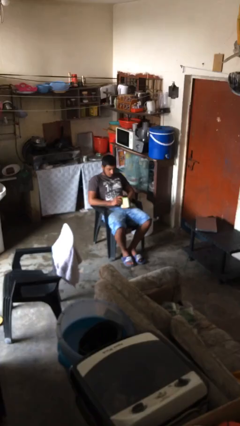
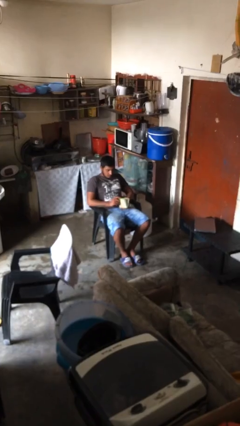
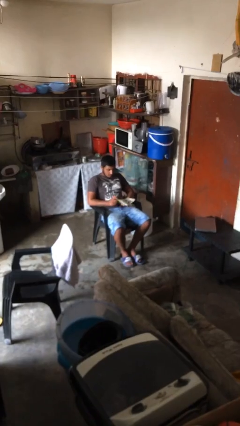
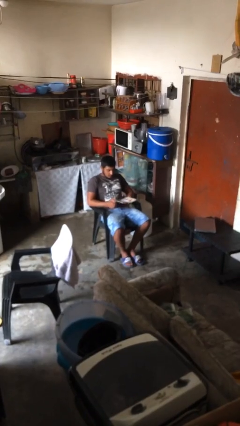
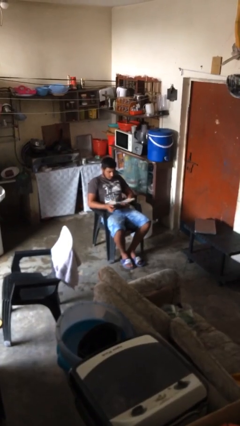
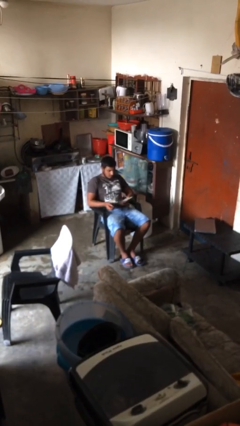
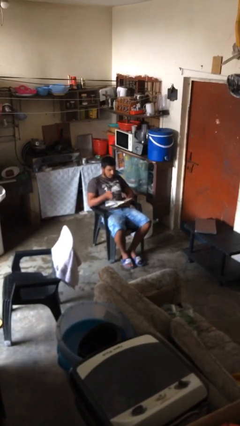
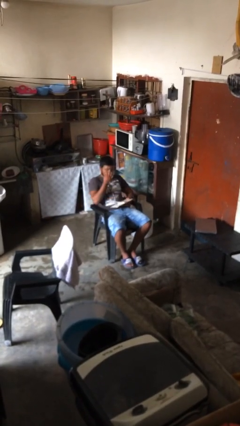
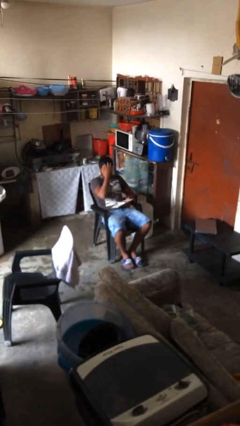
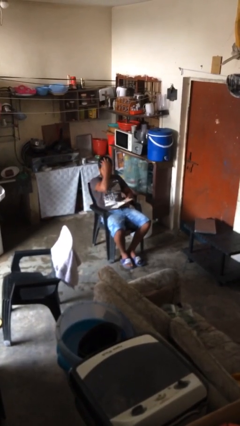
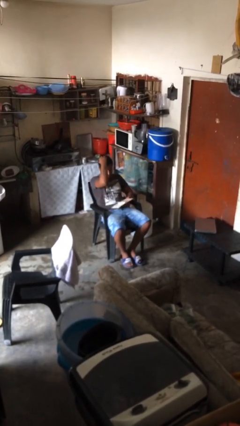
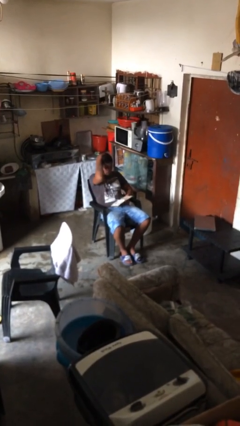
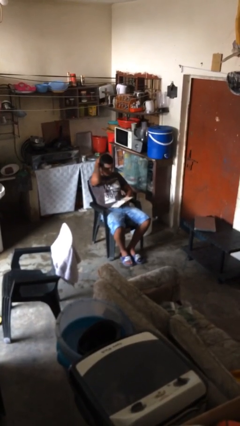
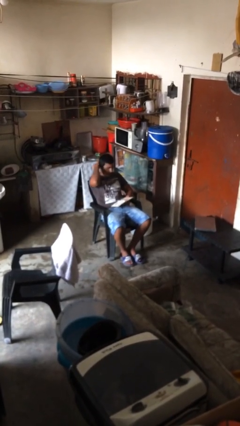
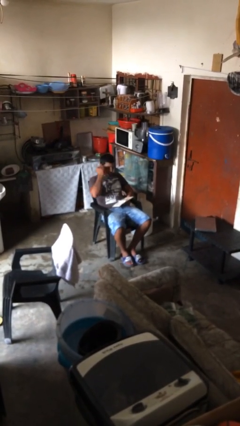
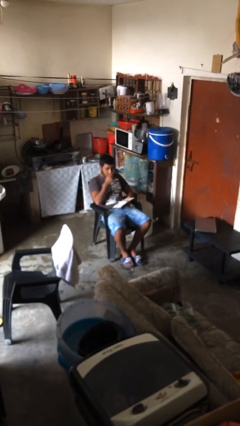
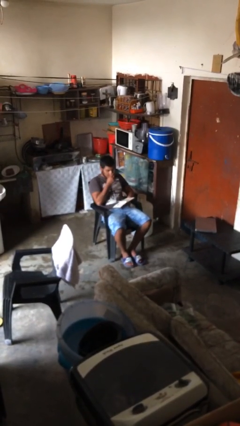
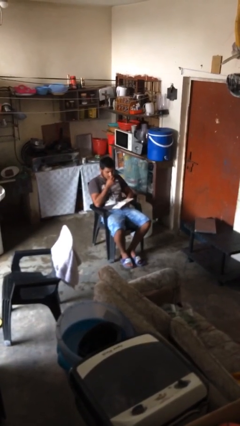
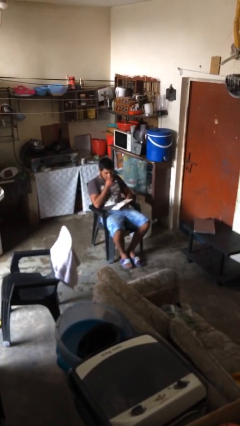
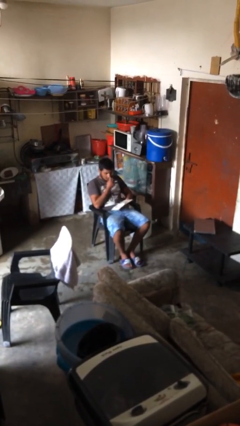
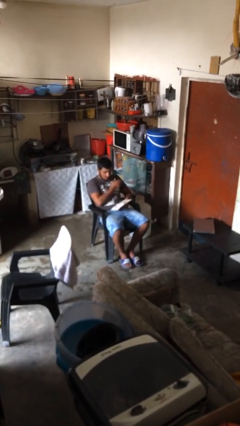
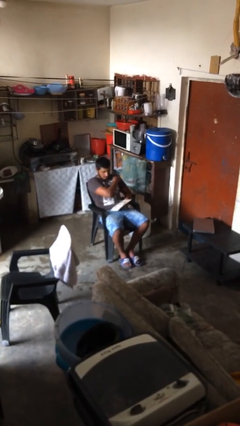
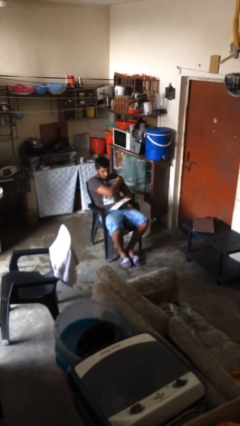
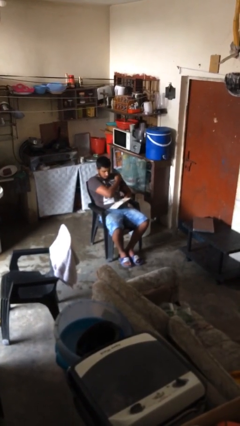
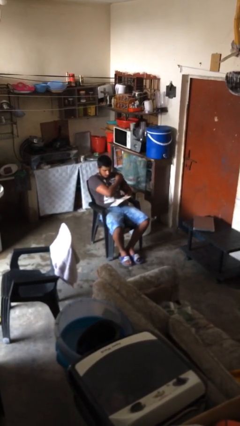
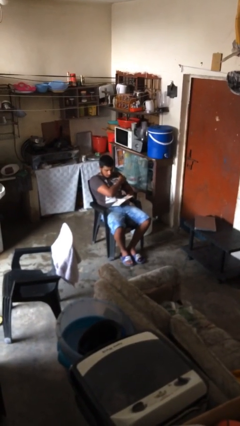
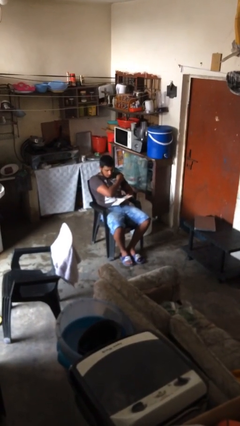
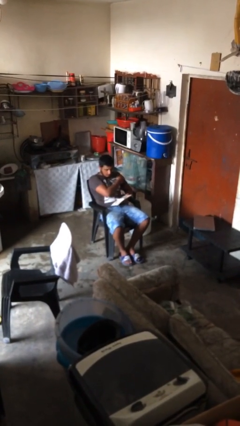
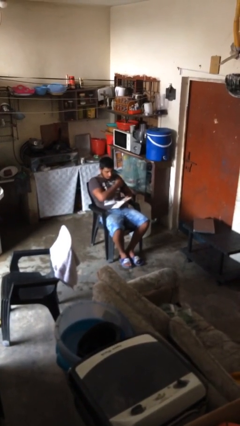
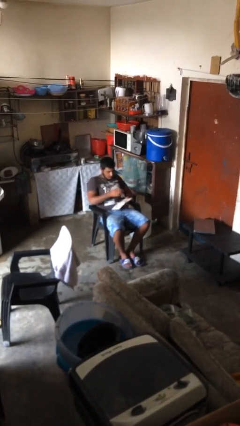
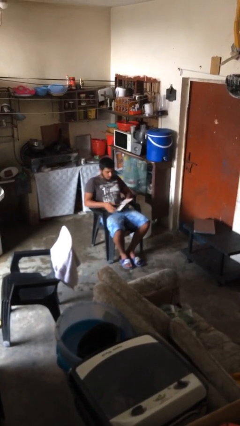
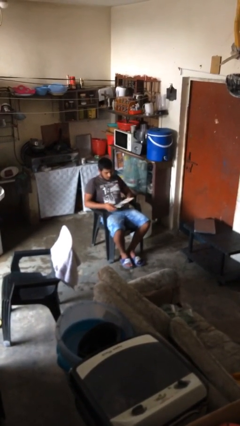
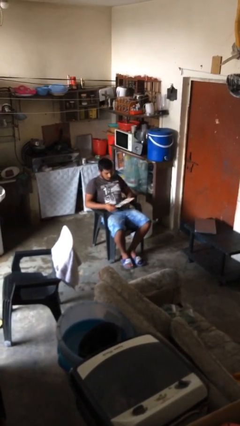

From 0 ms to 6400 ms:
person reads document

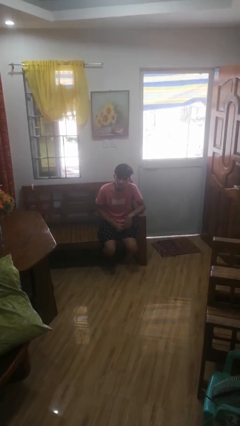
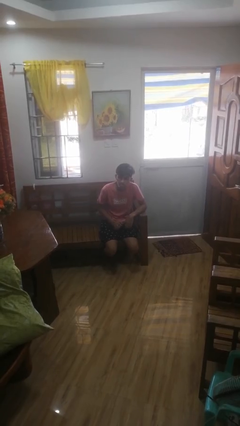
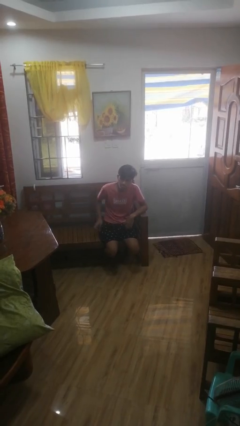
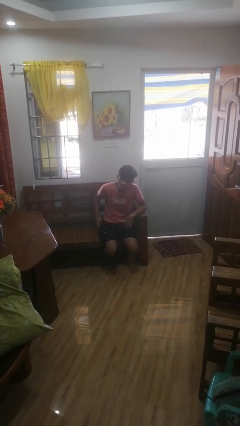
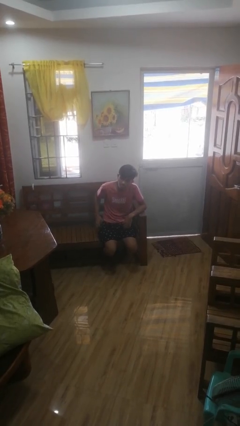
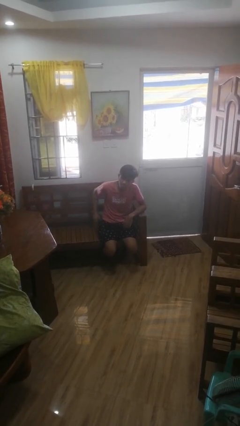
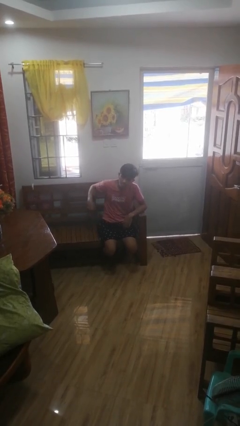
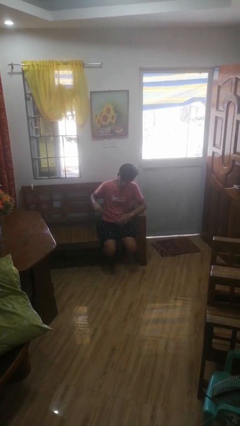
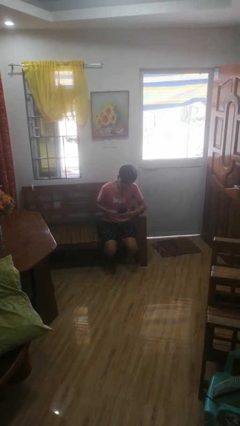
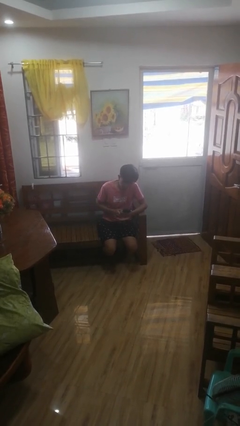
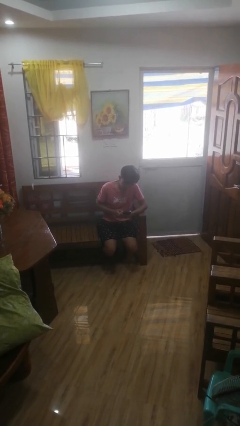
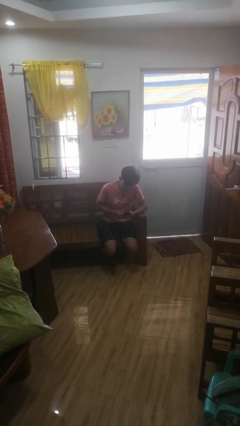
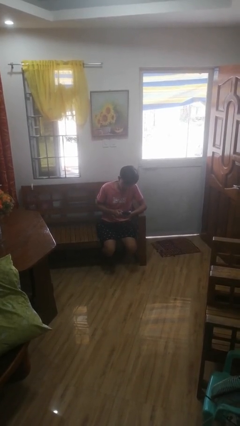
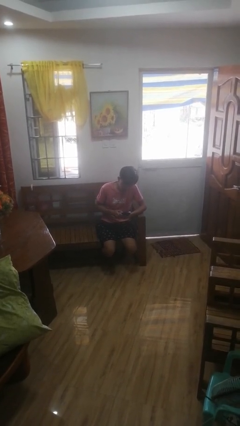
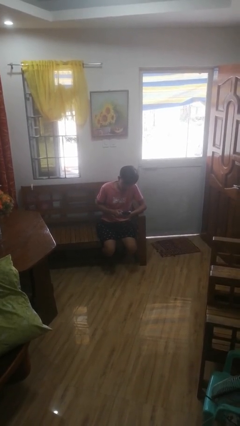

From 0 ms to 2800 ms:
person takes phone from pocket

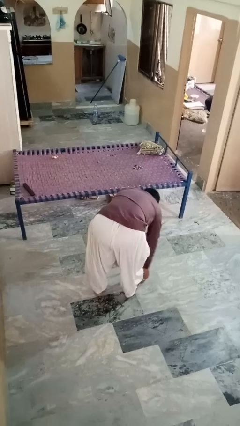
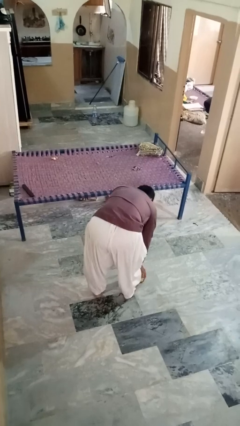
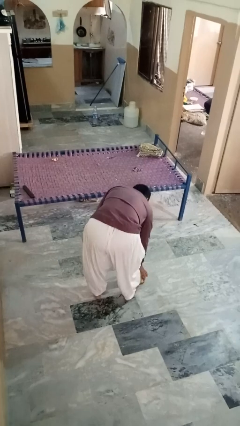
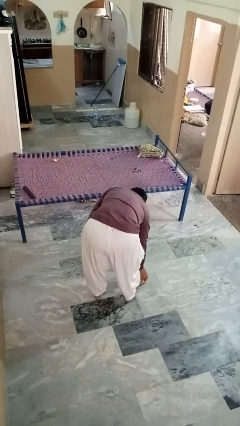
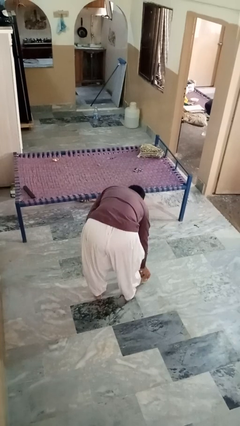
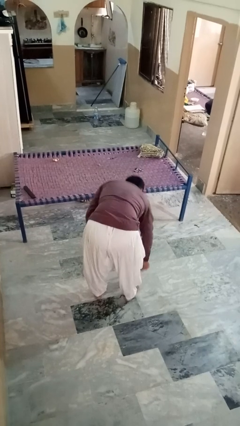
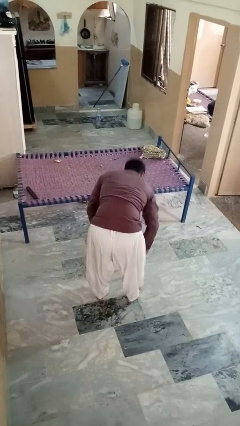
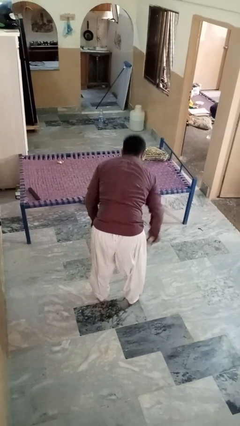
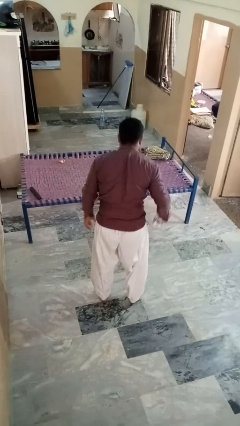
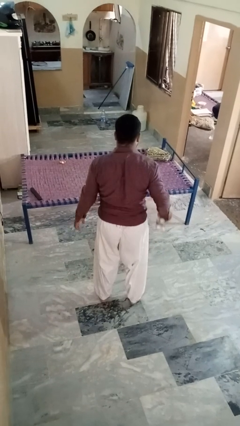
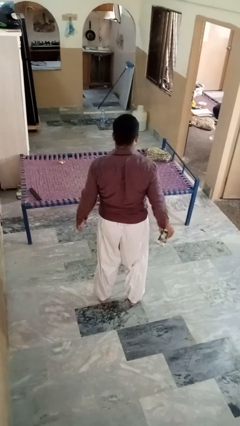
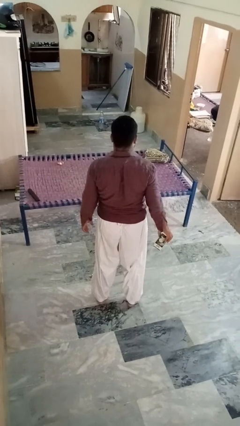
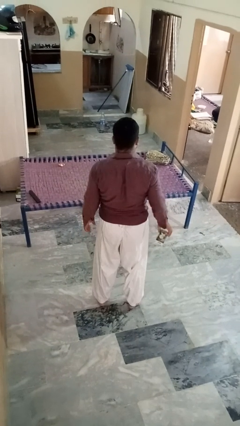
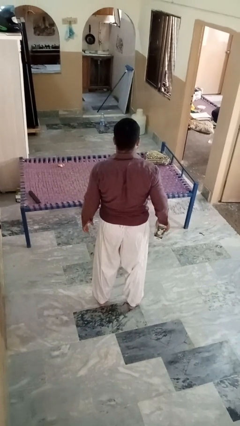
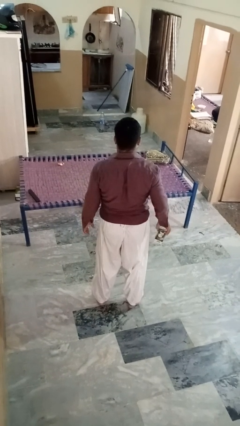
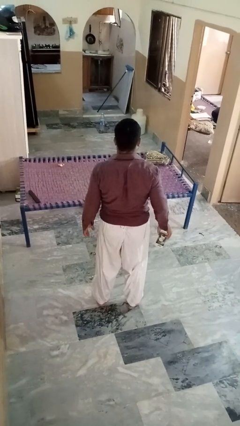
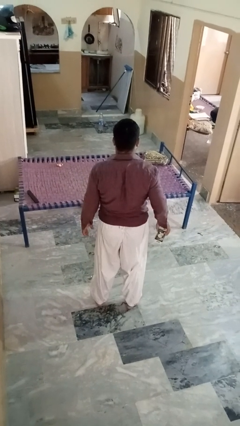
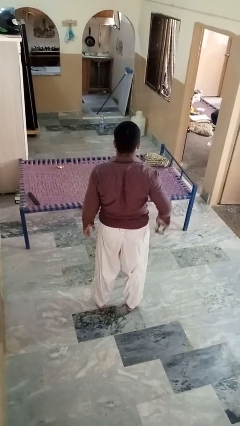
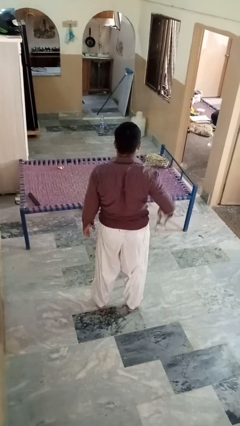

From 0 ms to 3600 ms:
person picks up object from floor

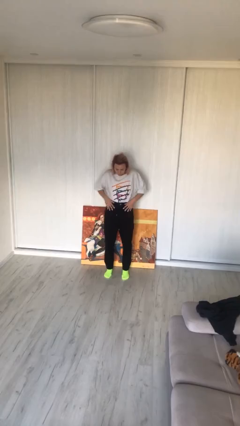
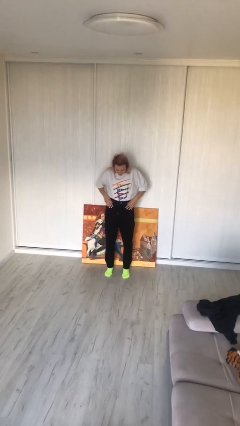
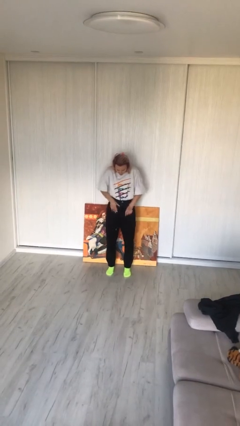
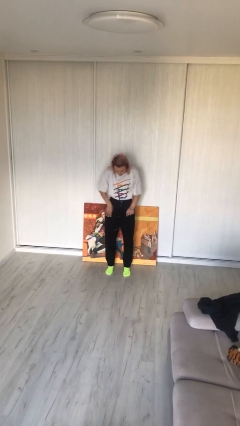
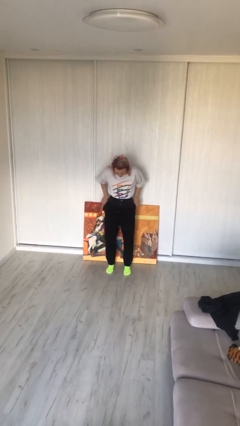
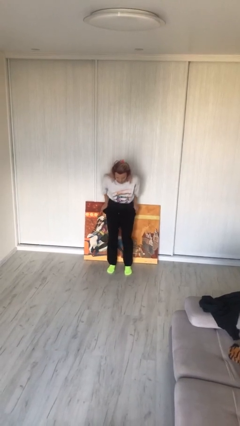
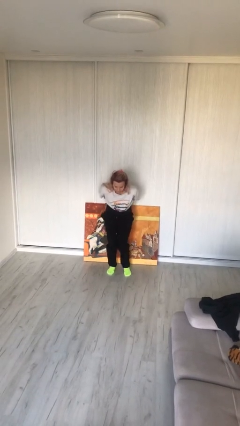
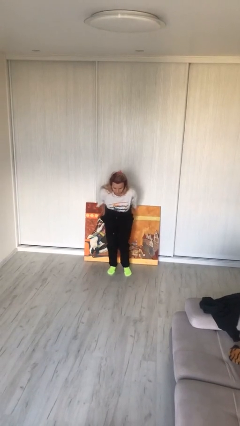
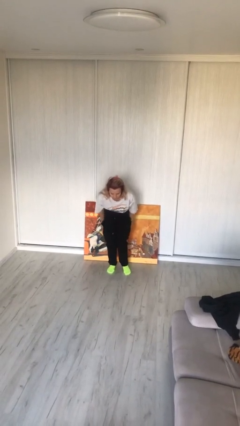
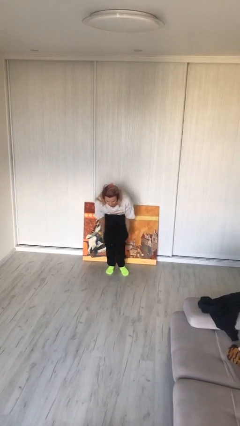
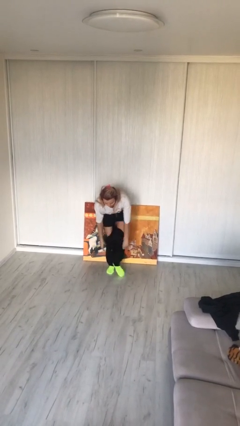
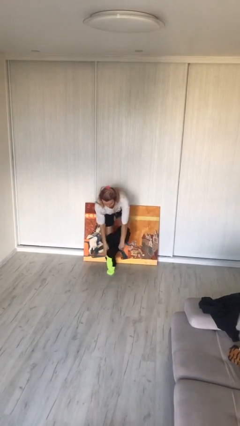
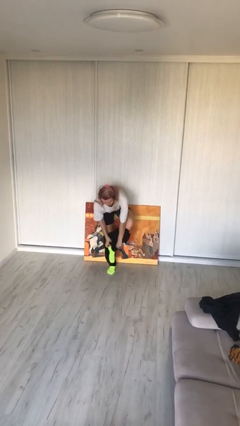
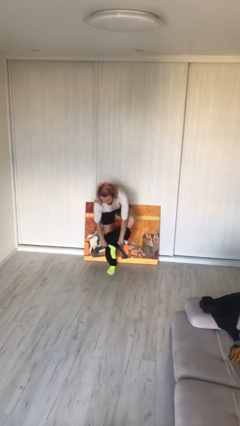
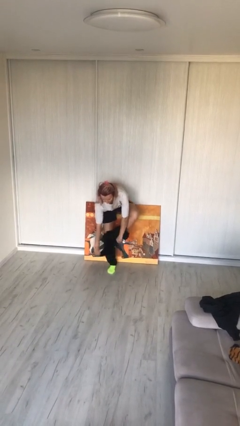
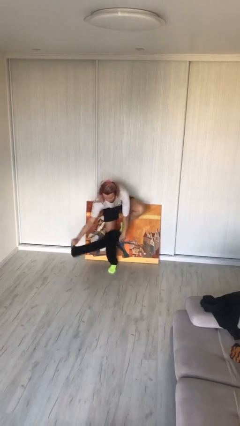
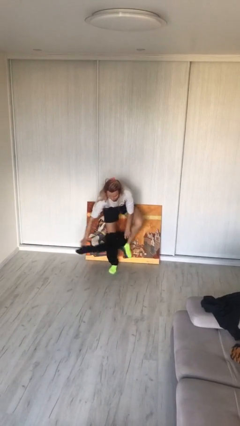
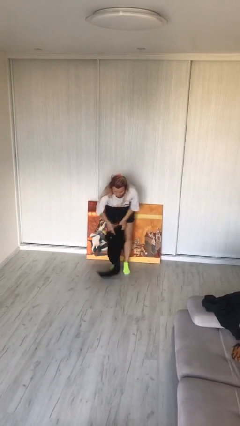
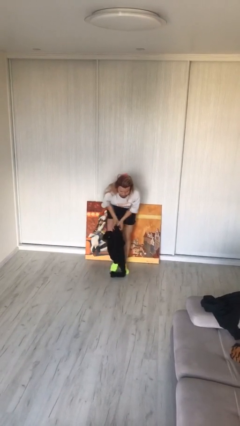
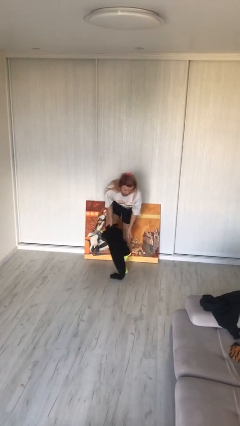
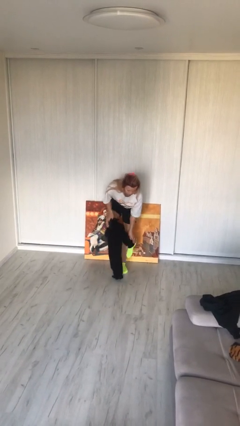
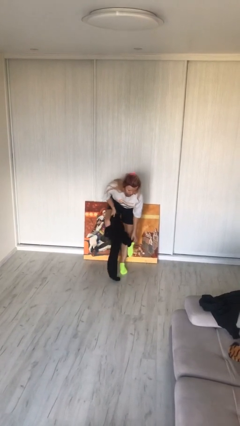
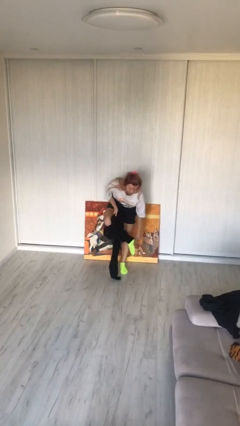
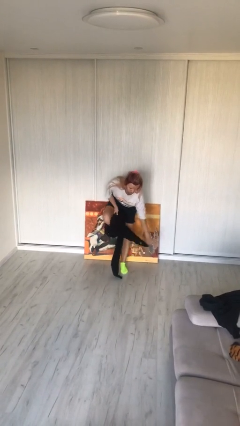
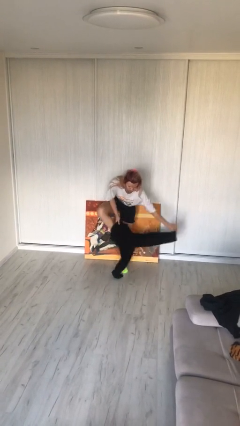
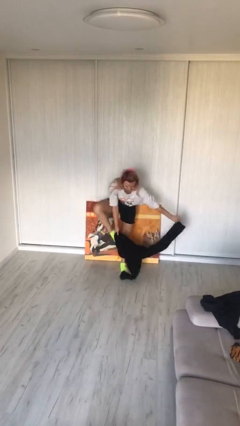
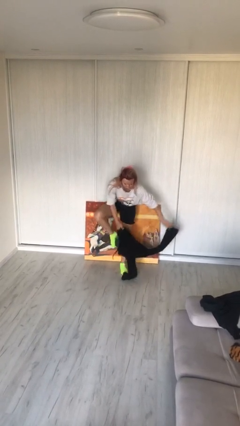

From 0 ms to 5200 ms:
person takes off pants
